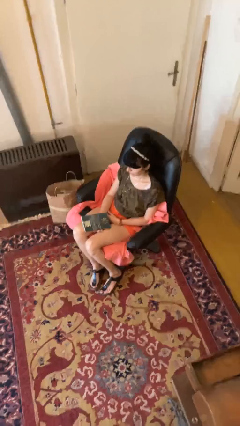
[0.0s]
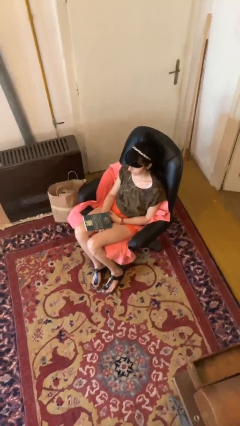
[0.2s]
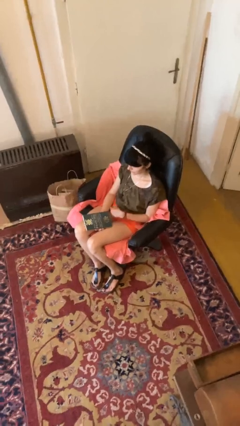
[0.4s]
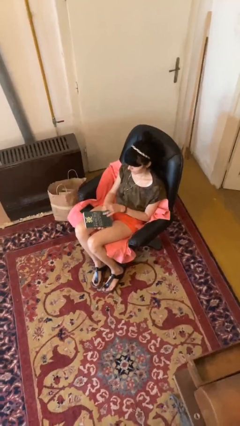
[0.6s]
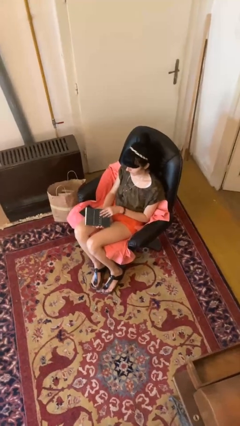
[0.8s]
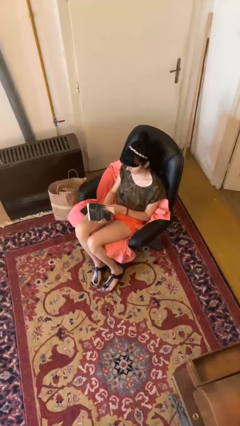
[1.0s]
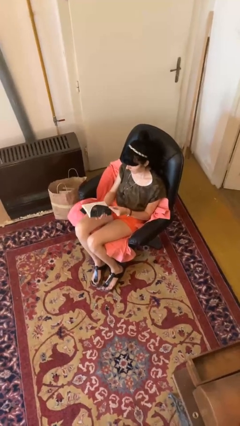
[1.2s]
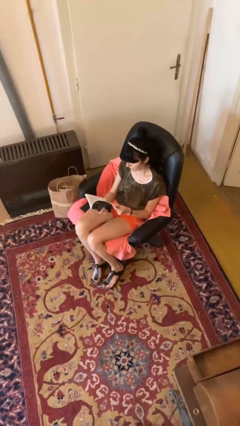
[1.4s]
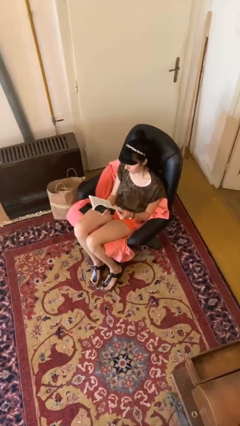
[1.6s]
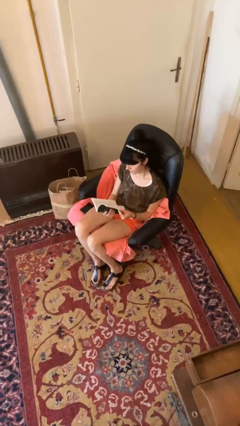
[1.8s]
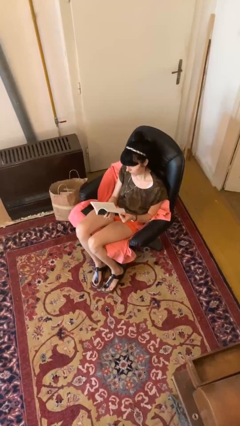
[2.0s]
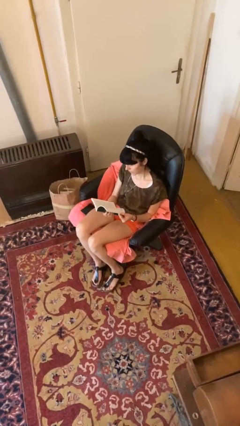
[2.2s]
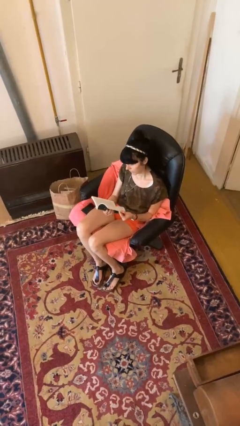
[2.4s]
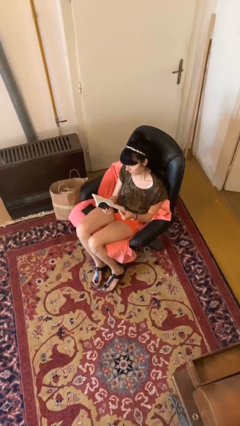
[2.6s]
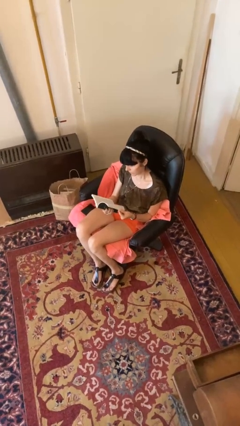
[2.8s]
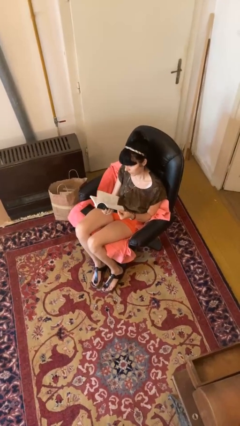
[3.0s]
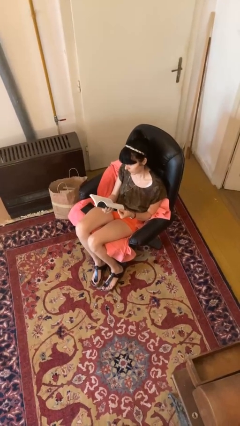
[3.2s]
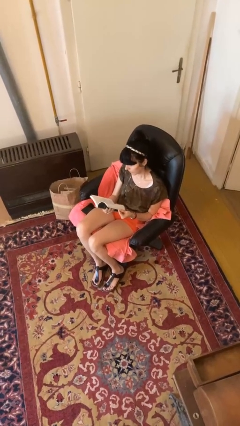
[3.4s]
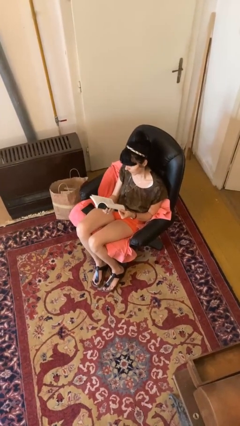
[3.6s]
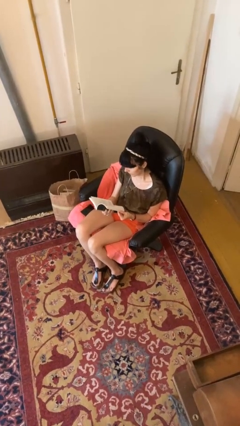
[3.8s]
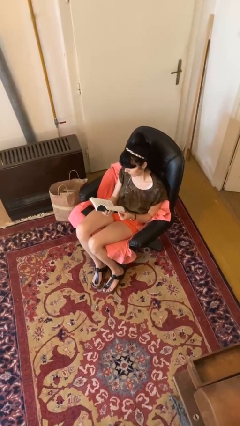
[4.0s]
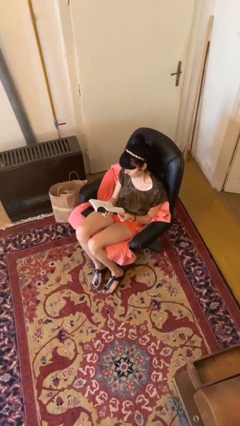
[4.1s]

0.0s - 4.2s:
person reads book

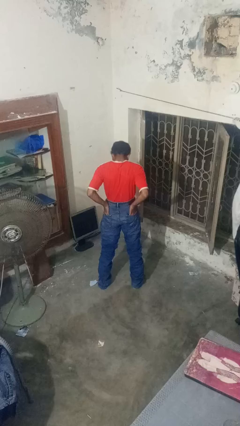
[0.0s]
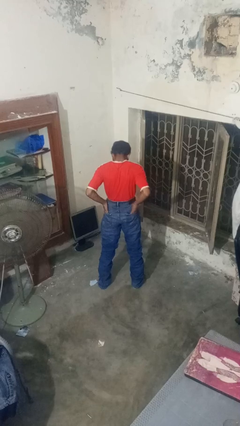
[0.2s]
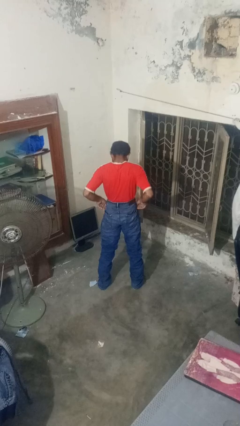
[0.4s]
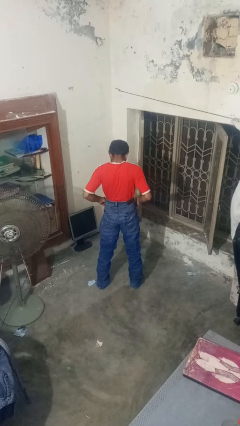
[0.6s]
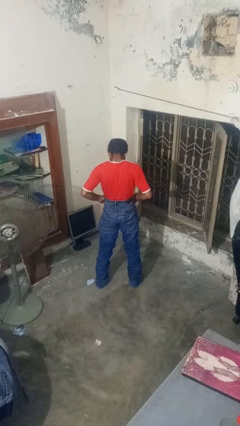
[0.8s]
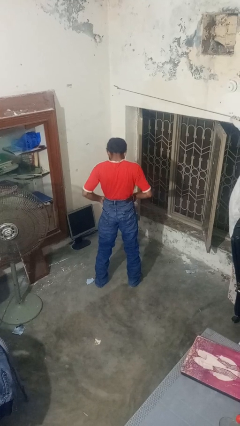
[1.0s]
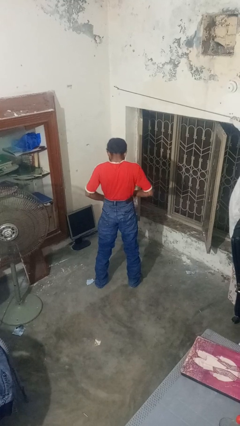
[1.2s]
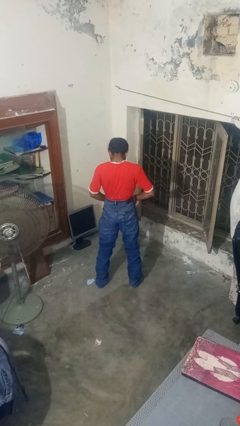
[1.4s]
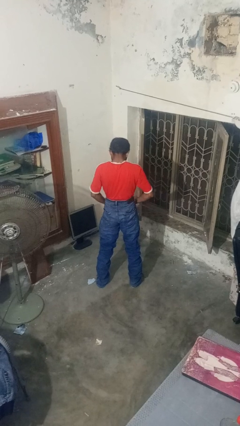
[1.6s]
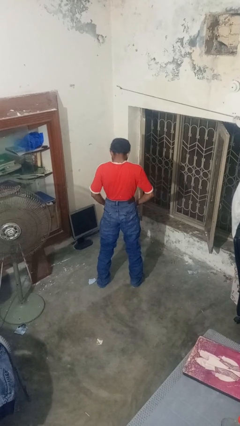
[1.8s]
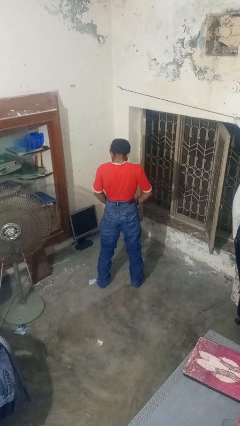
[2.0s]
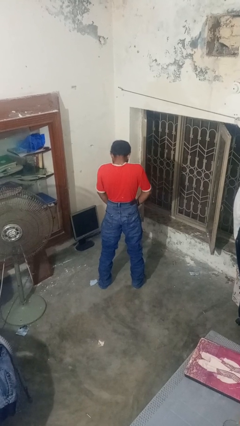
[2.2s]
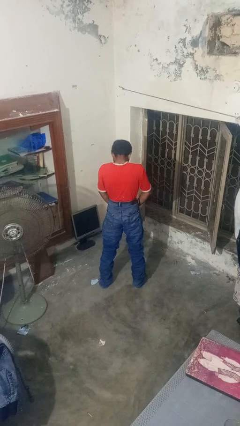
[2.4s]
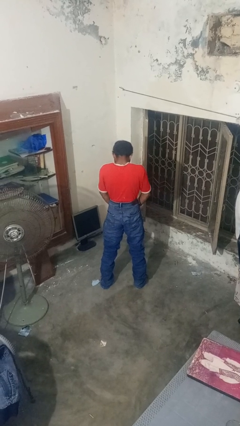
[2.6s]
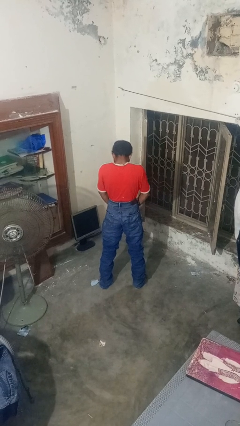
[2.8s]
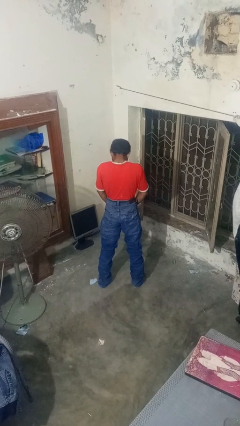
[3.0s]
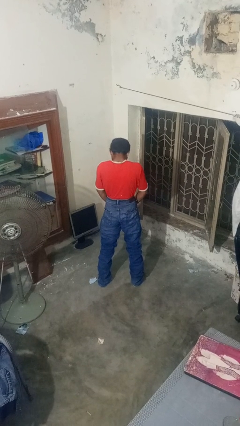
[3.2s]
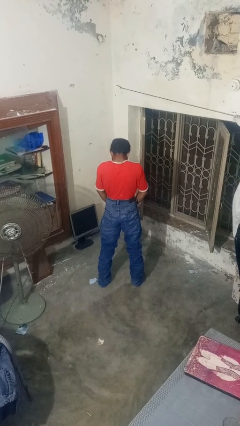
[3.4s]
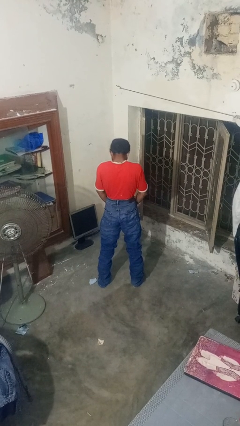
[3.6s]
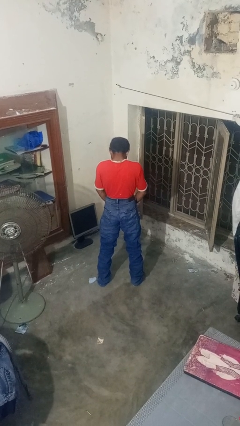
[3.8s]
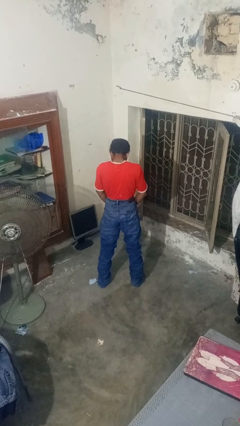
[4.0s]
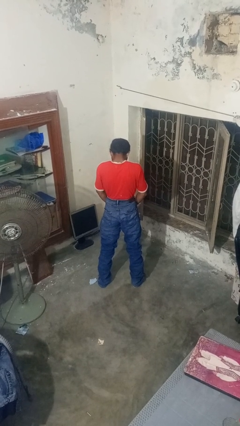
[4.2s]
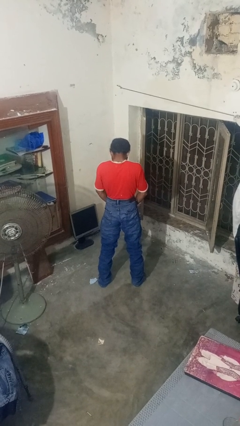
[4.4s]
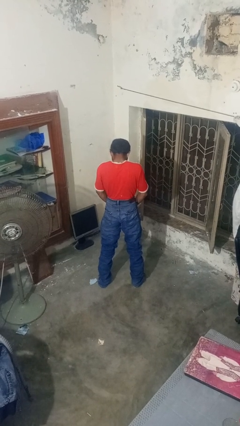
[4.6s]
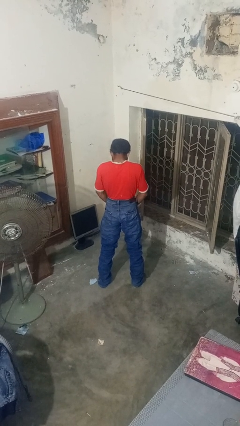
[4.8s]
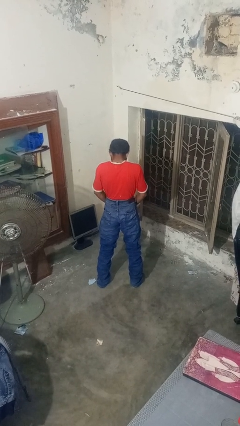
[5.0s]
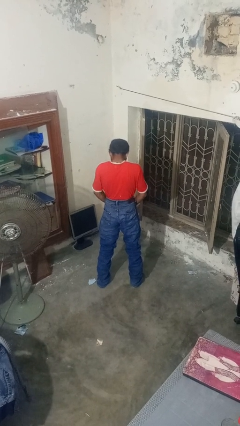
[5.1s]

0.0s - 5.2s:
person puts hands in back pockets

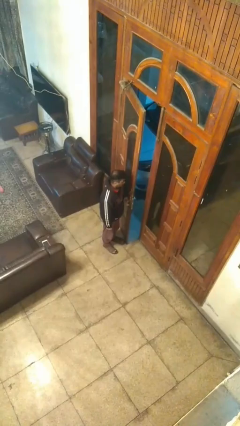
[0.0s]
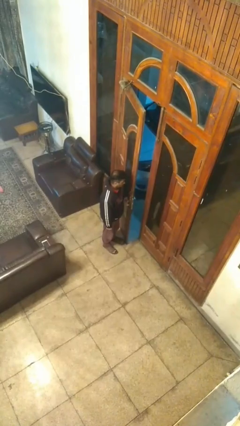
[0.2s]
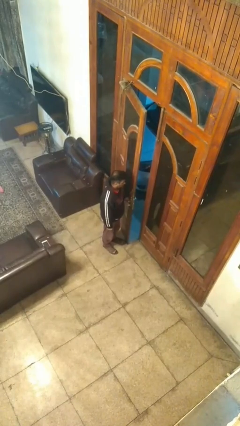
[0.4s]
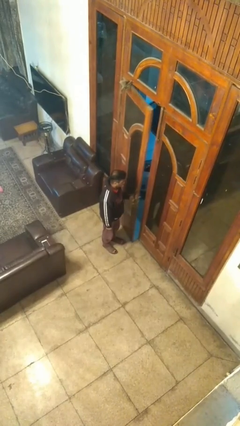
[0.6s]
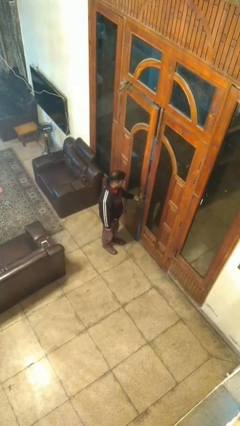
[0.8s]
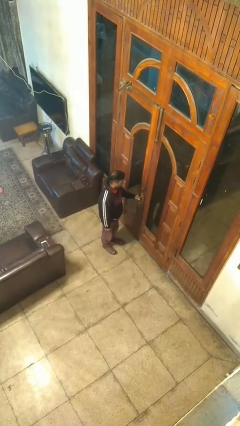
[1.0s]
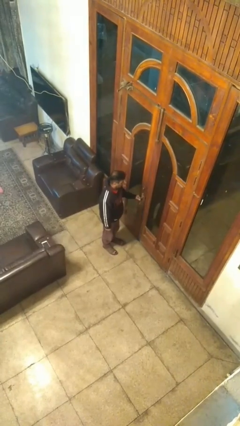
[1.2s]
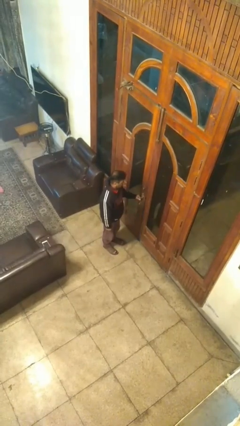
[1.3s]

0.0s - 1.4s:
person closes facility door

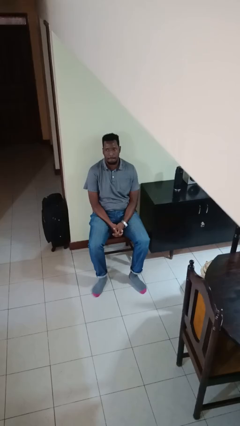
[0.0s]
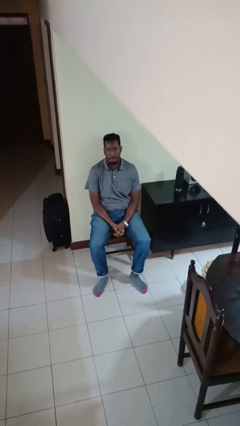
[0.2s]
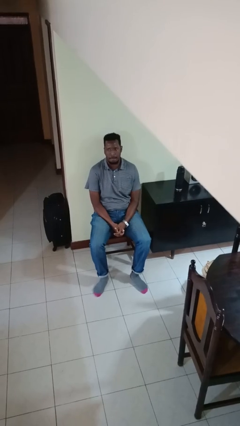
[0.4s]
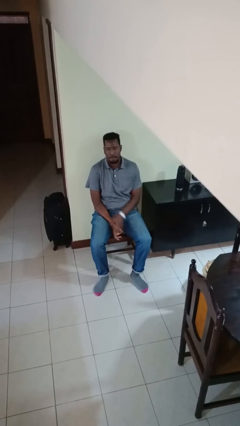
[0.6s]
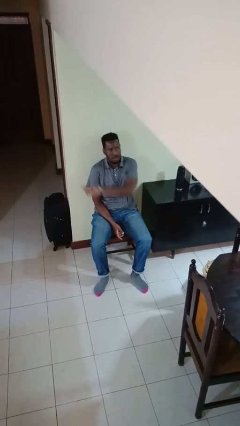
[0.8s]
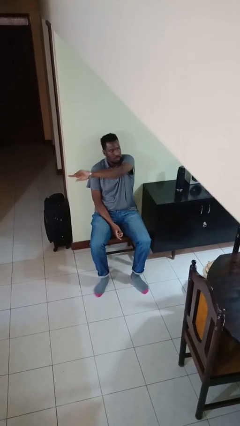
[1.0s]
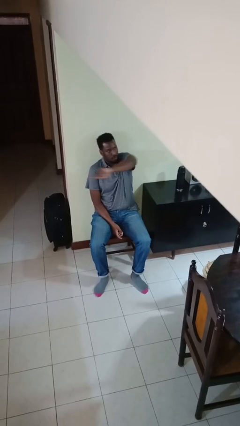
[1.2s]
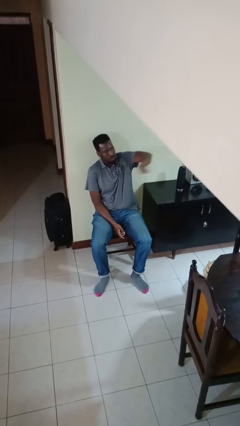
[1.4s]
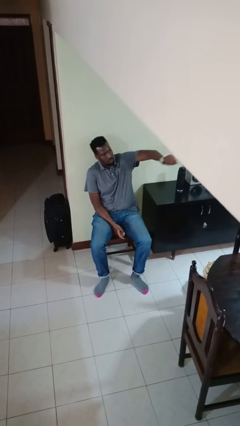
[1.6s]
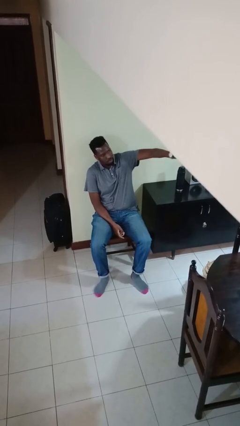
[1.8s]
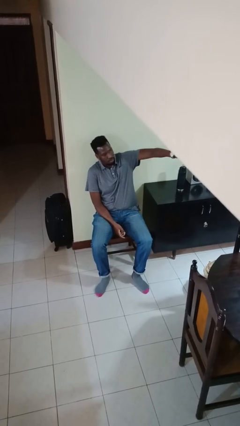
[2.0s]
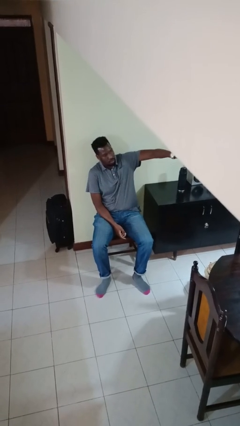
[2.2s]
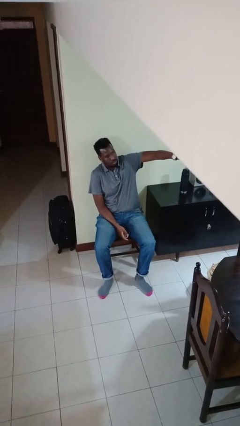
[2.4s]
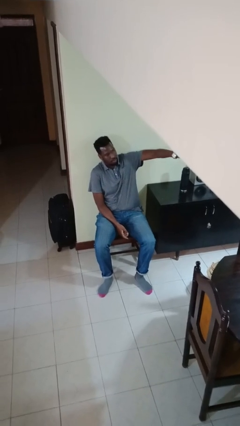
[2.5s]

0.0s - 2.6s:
person gestures swipe left

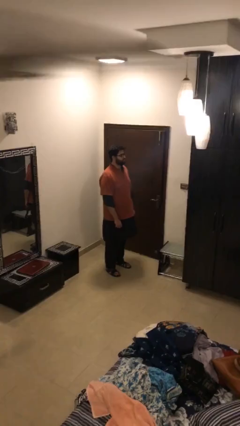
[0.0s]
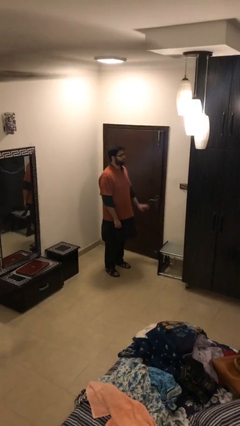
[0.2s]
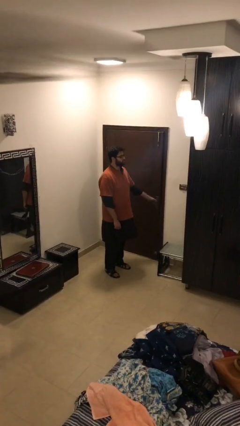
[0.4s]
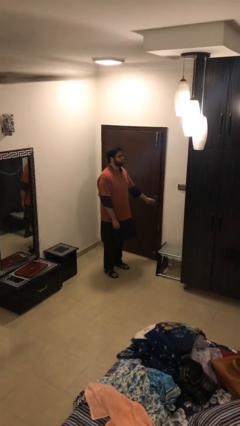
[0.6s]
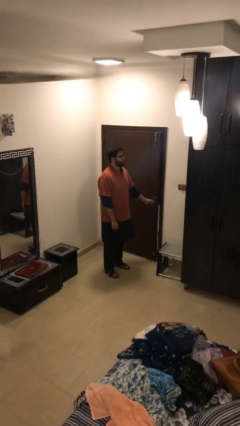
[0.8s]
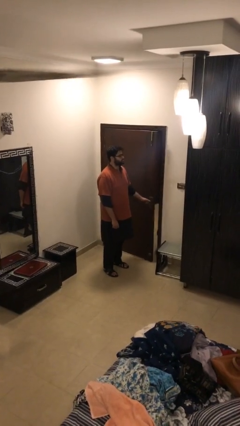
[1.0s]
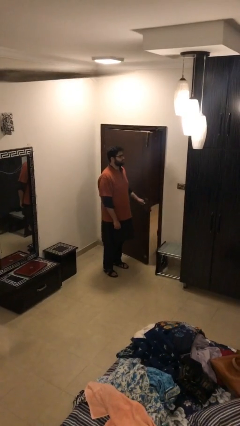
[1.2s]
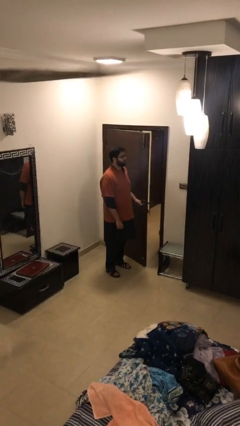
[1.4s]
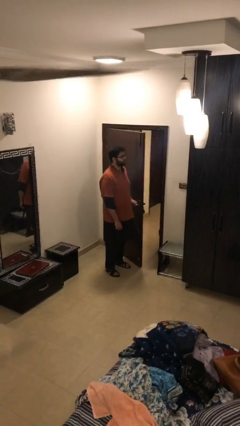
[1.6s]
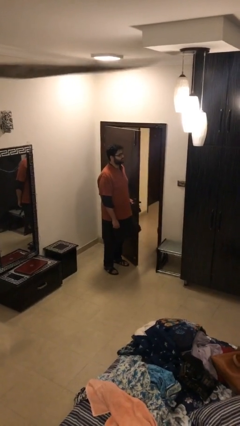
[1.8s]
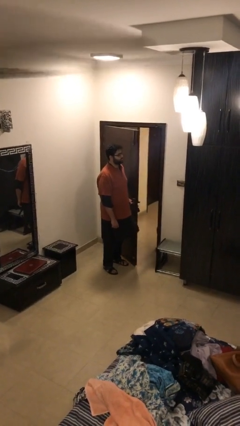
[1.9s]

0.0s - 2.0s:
person opens facility door

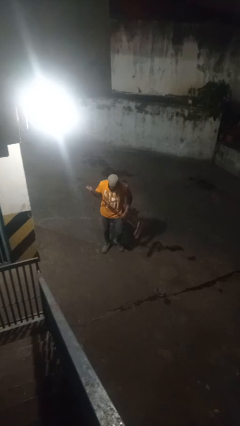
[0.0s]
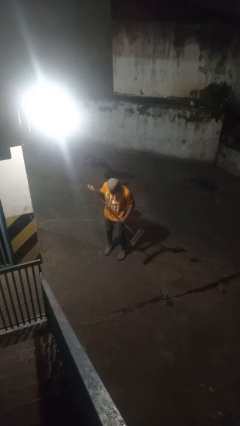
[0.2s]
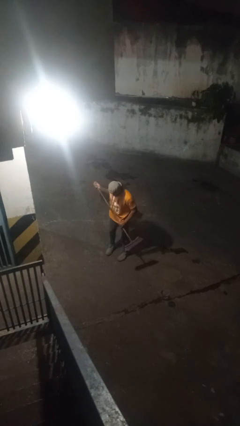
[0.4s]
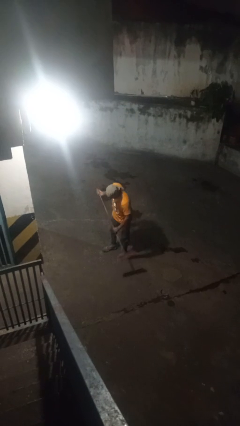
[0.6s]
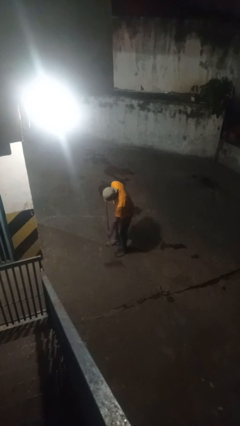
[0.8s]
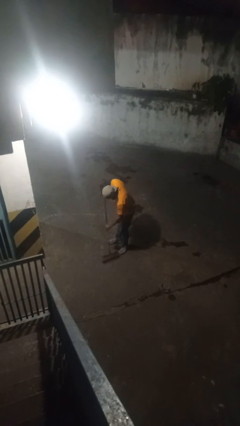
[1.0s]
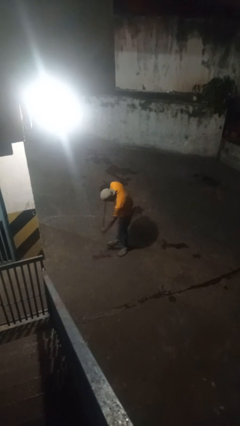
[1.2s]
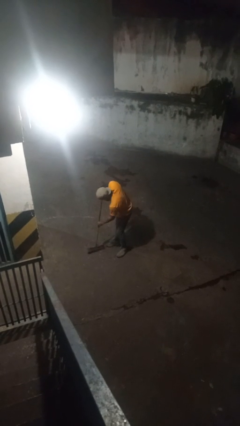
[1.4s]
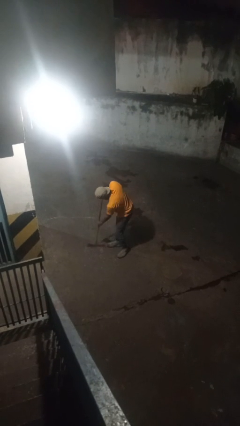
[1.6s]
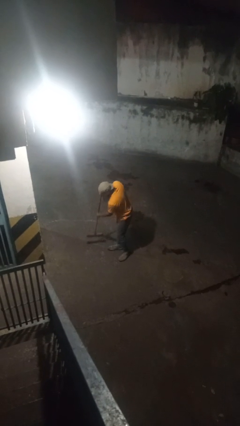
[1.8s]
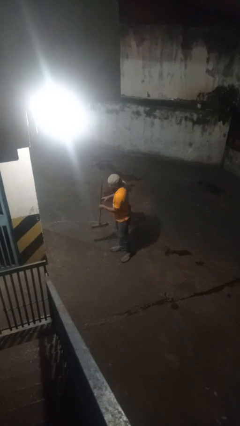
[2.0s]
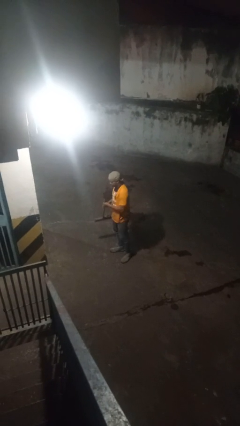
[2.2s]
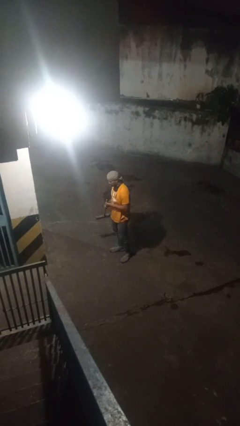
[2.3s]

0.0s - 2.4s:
person sweeps floor
